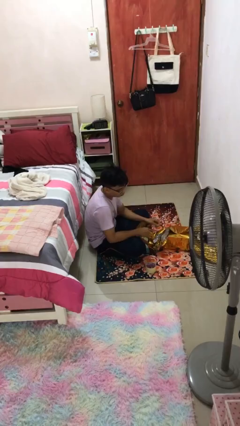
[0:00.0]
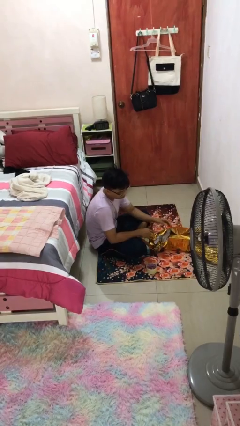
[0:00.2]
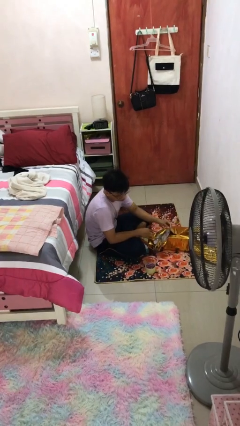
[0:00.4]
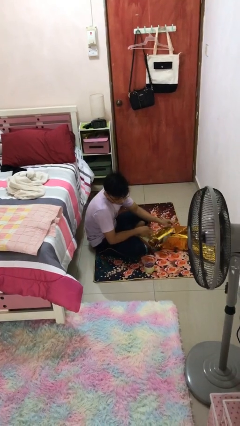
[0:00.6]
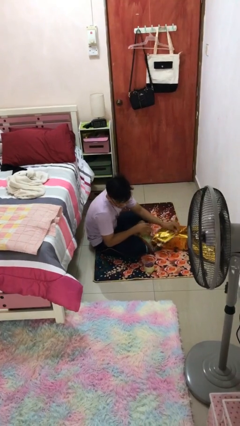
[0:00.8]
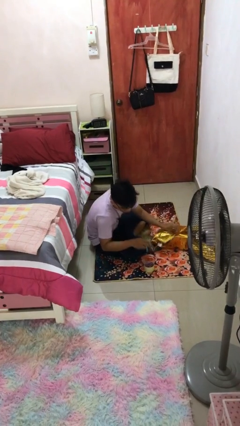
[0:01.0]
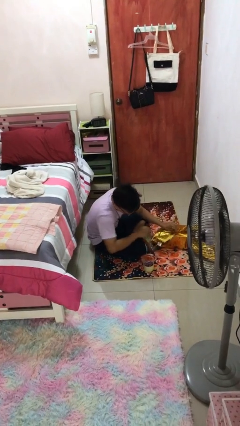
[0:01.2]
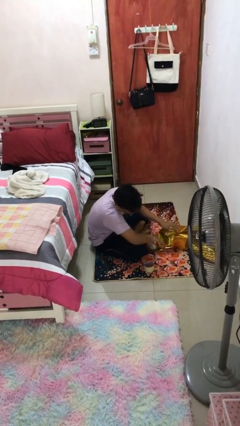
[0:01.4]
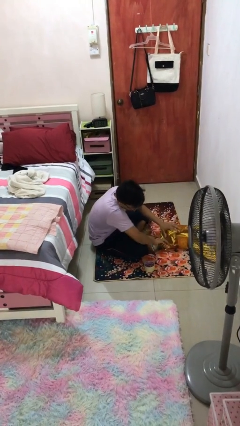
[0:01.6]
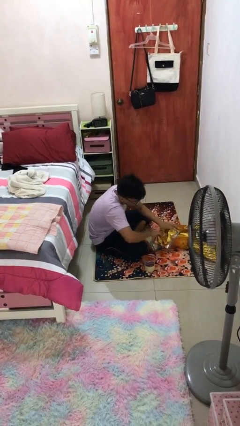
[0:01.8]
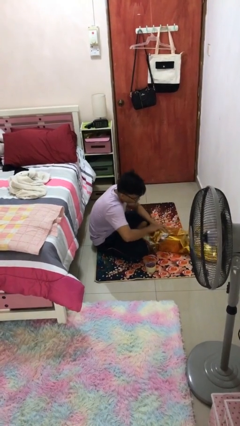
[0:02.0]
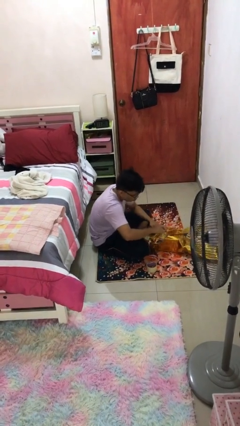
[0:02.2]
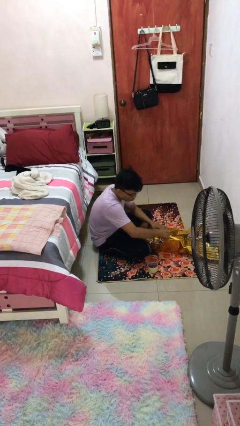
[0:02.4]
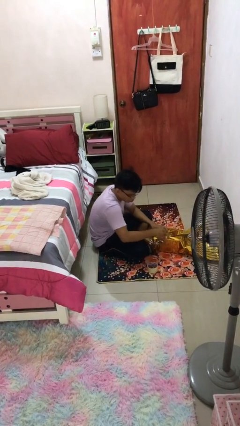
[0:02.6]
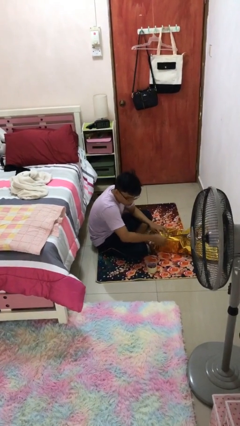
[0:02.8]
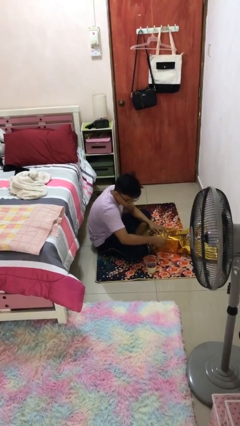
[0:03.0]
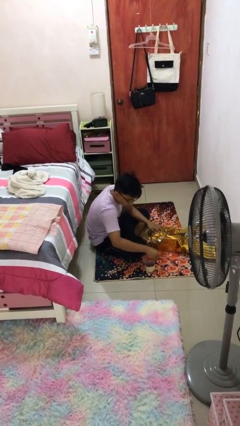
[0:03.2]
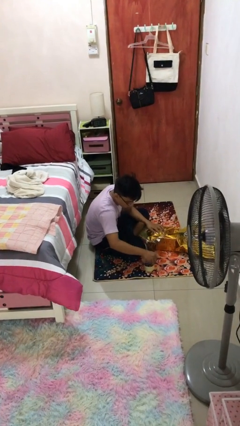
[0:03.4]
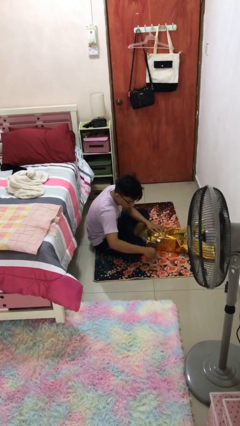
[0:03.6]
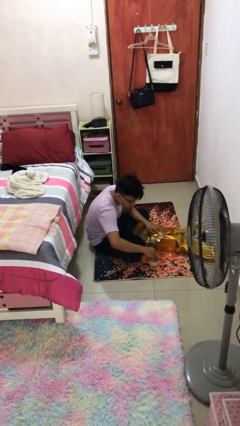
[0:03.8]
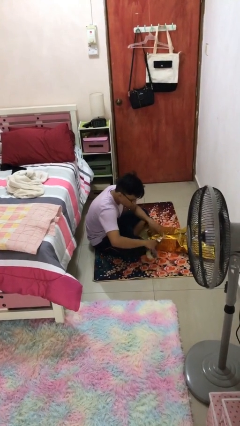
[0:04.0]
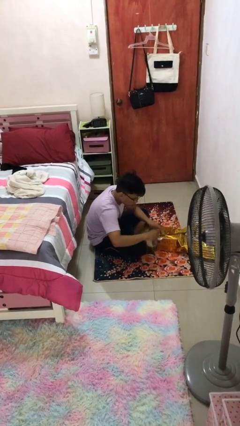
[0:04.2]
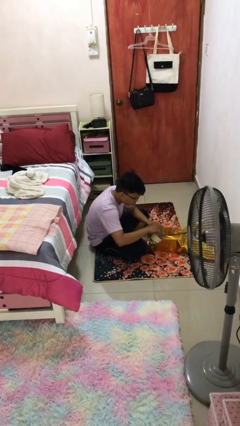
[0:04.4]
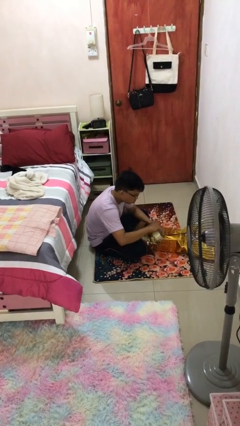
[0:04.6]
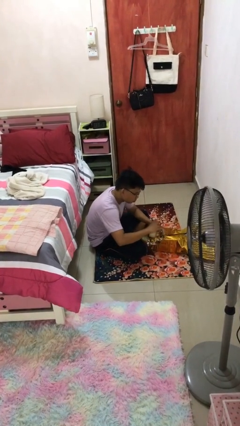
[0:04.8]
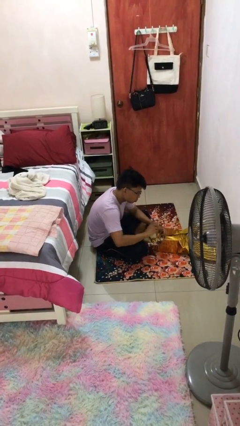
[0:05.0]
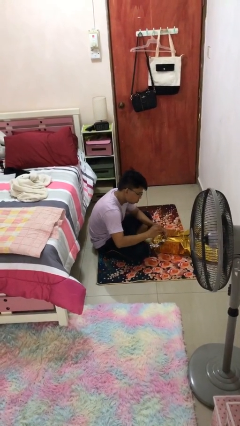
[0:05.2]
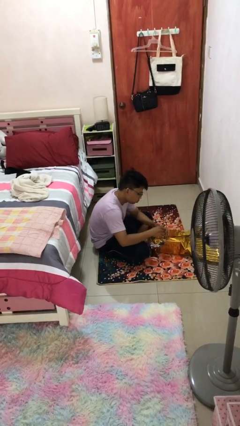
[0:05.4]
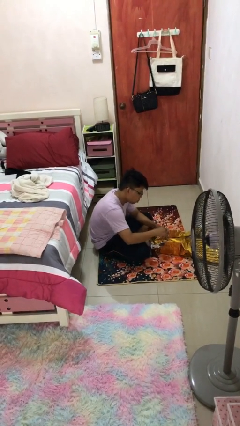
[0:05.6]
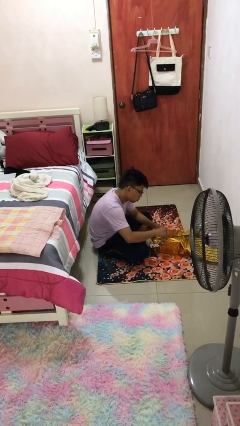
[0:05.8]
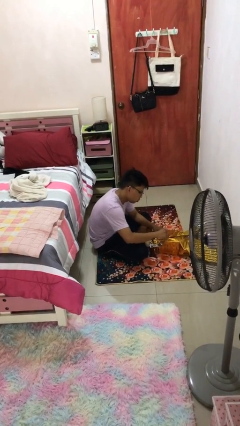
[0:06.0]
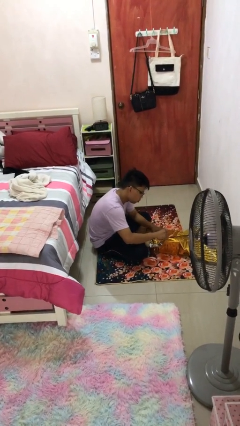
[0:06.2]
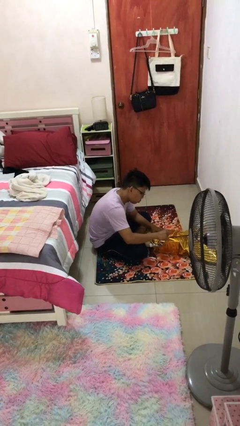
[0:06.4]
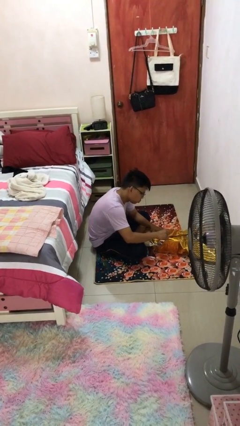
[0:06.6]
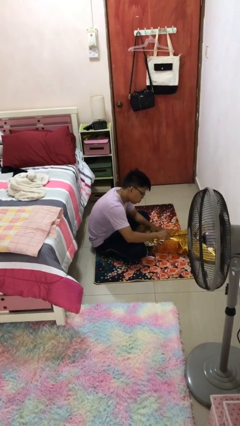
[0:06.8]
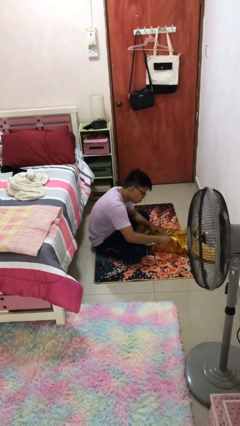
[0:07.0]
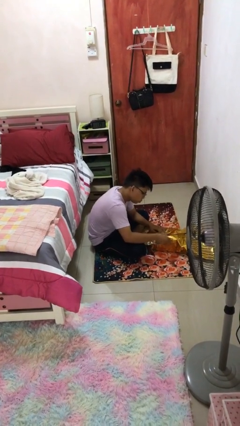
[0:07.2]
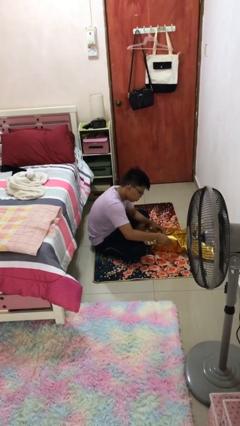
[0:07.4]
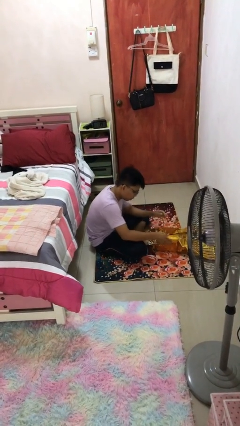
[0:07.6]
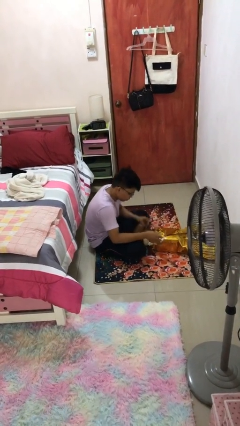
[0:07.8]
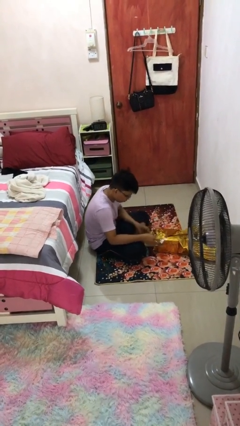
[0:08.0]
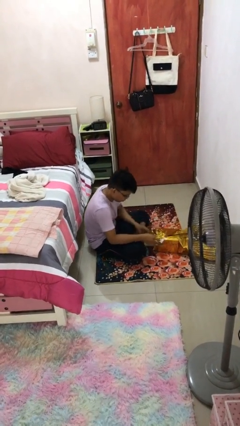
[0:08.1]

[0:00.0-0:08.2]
person wraps box

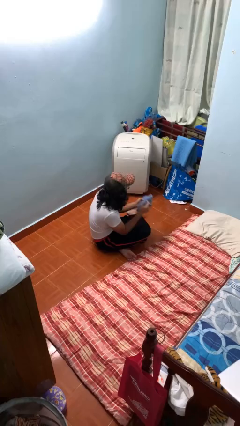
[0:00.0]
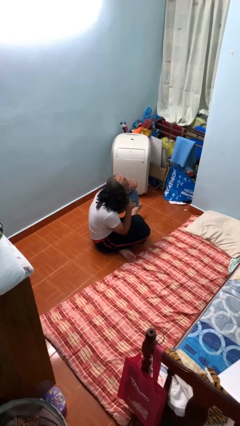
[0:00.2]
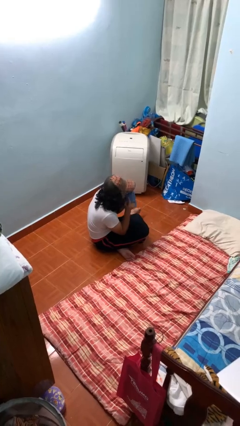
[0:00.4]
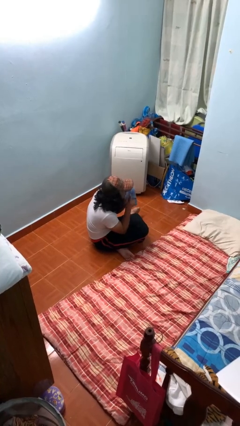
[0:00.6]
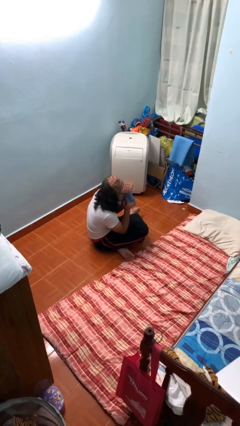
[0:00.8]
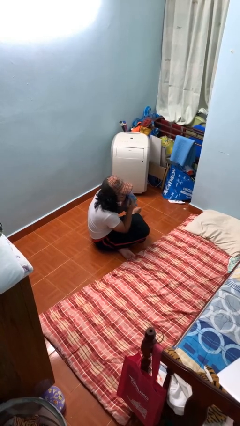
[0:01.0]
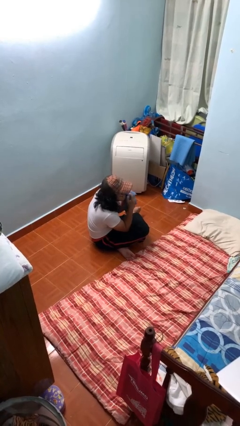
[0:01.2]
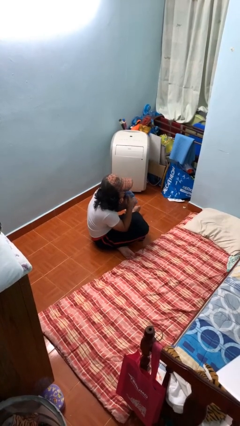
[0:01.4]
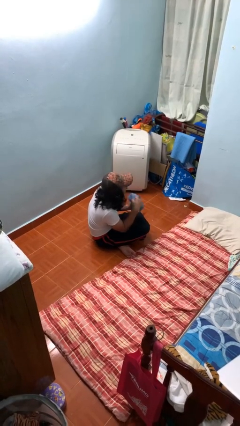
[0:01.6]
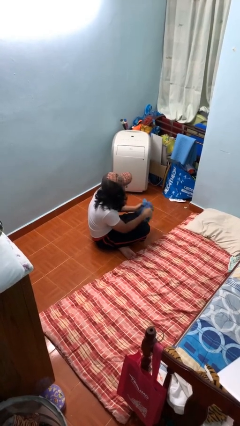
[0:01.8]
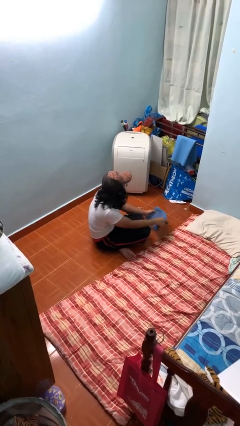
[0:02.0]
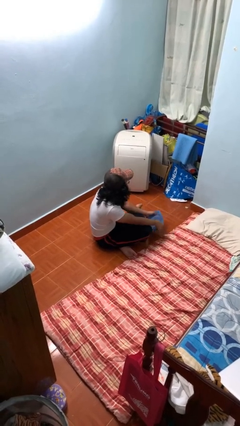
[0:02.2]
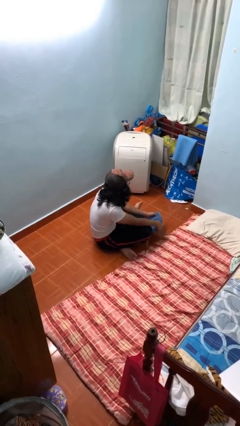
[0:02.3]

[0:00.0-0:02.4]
person wipes mouth with napkin

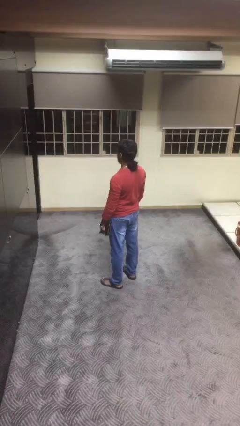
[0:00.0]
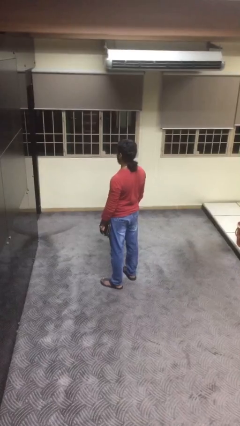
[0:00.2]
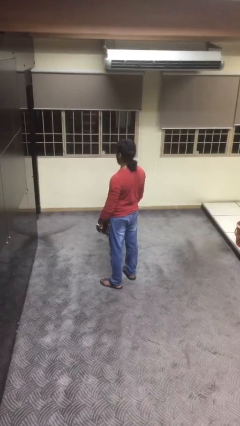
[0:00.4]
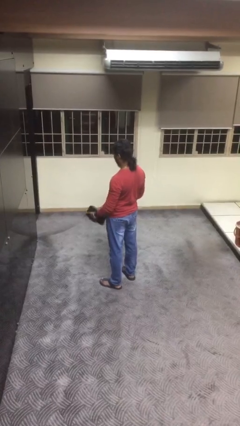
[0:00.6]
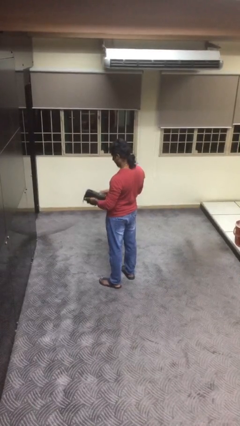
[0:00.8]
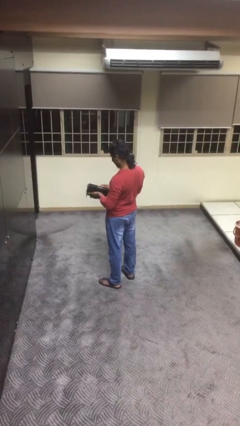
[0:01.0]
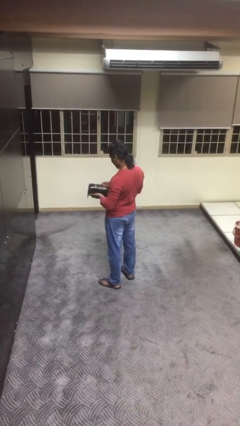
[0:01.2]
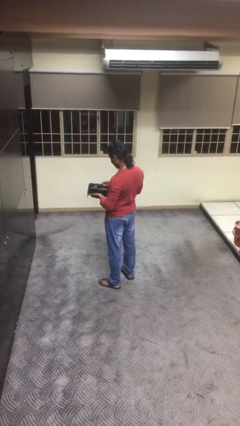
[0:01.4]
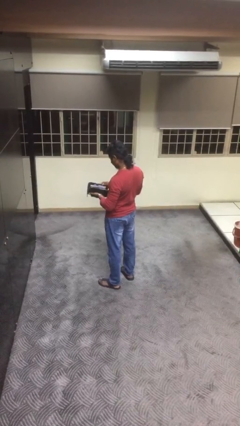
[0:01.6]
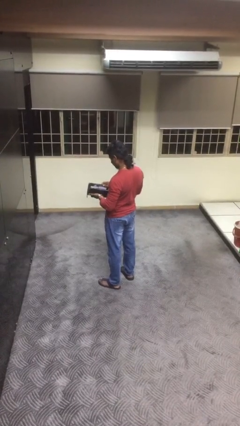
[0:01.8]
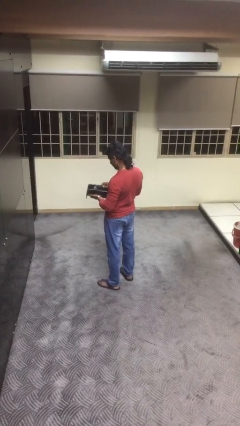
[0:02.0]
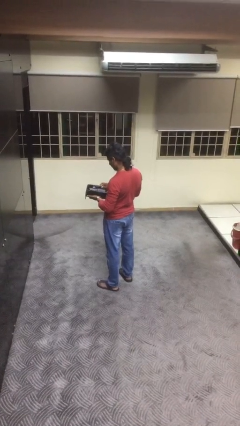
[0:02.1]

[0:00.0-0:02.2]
person searches in purse

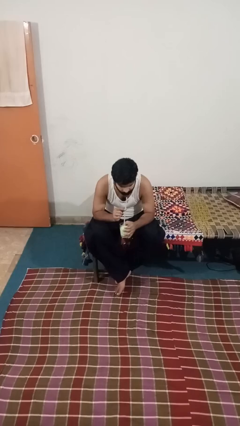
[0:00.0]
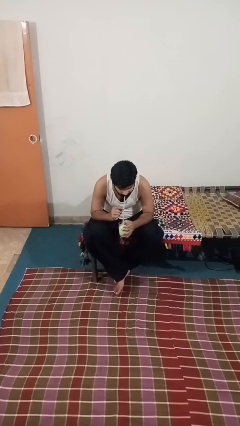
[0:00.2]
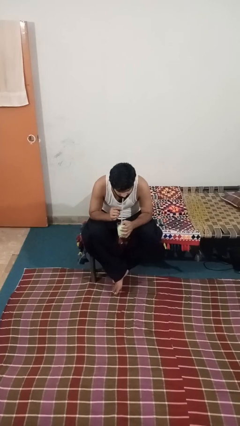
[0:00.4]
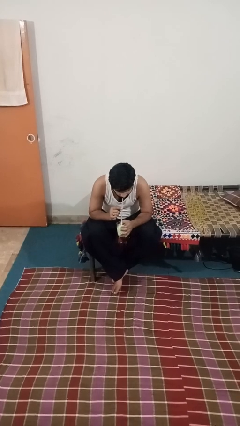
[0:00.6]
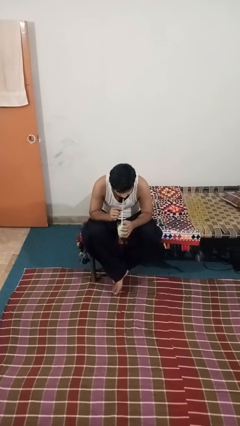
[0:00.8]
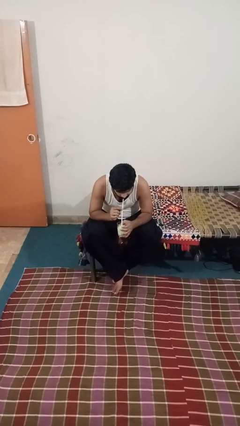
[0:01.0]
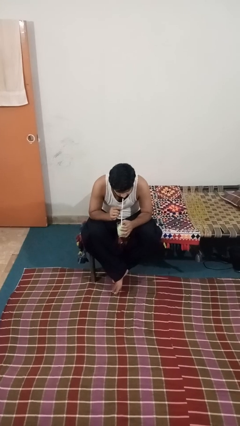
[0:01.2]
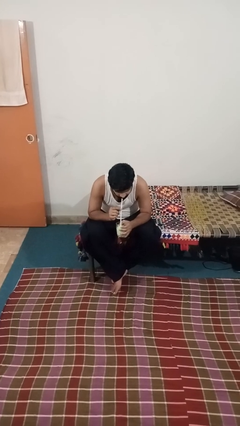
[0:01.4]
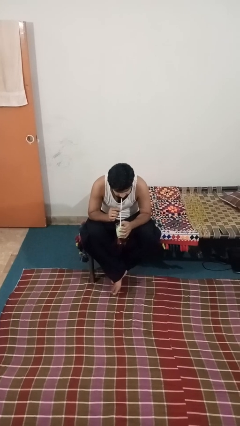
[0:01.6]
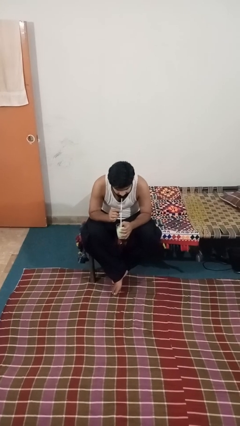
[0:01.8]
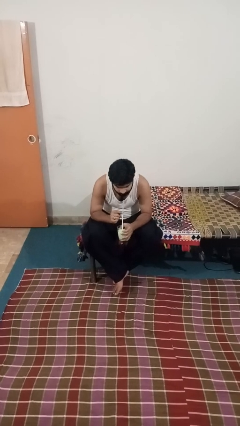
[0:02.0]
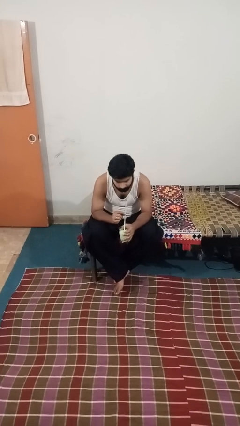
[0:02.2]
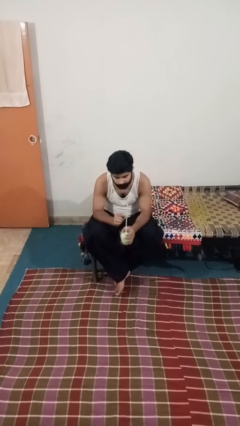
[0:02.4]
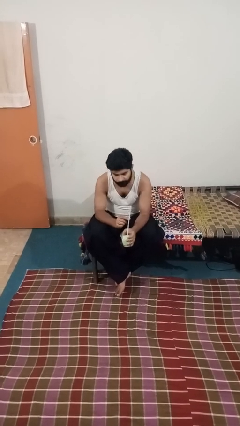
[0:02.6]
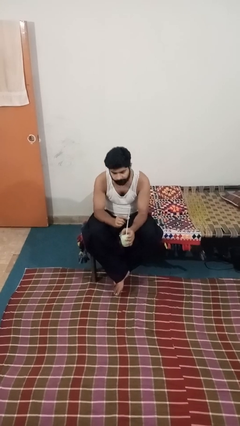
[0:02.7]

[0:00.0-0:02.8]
person drinks from straw

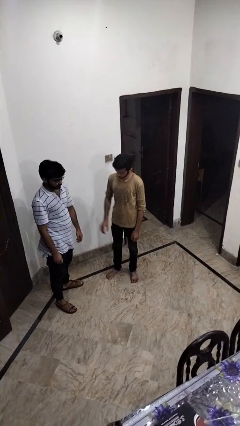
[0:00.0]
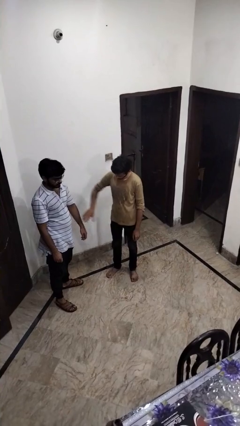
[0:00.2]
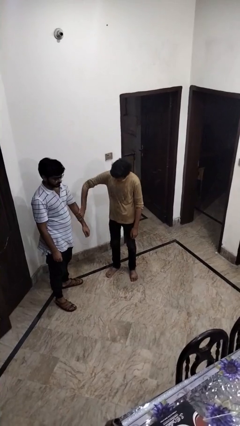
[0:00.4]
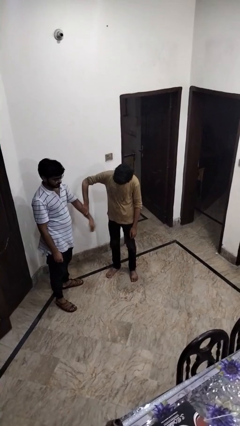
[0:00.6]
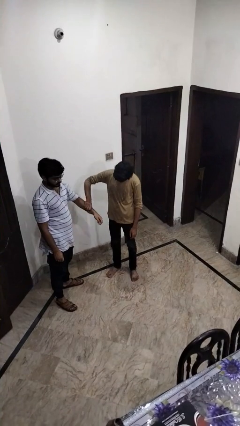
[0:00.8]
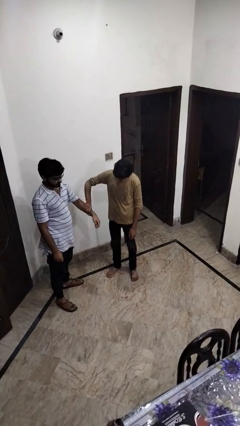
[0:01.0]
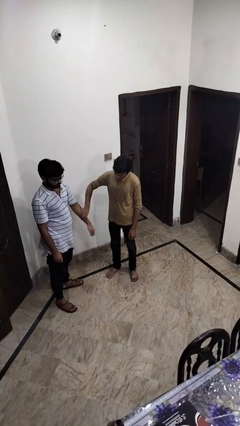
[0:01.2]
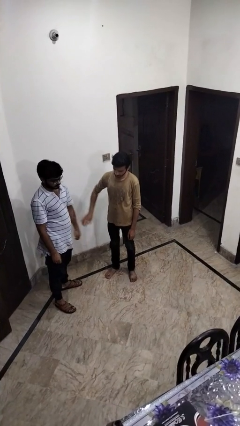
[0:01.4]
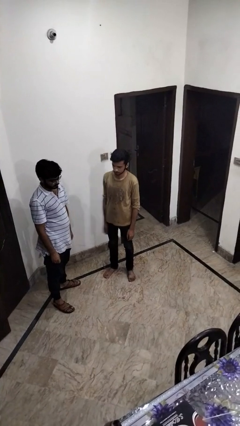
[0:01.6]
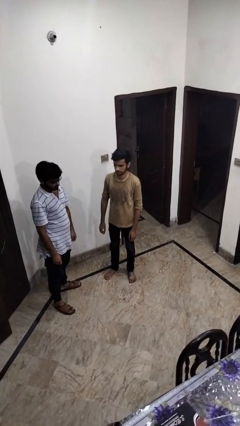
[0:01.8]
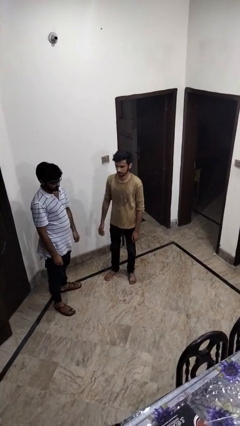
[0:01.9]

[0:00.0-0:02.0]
person grabs person by forearm
